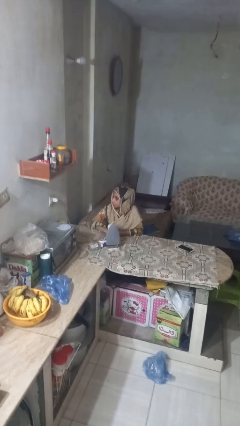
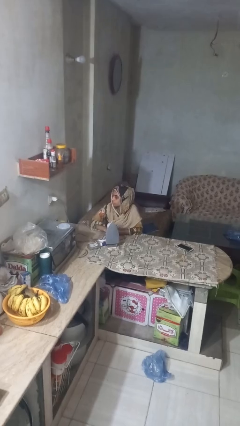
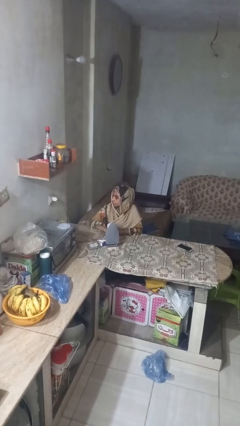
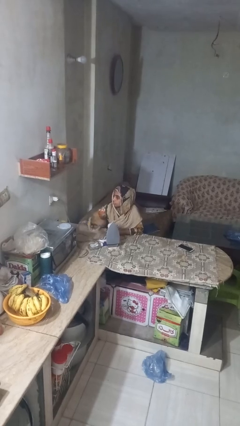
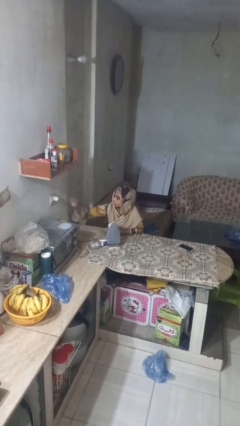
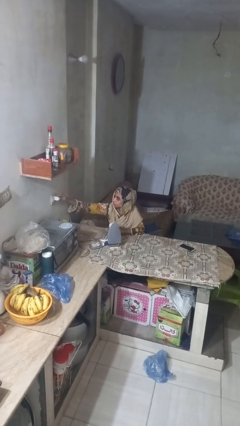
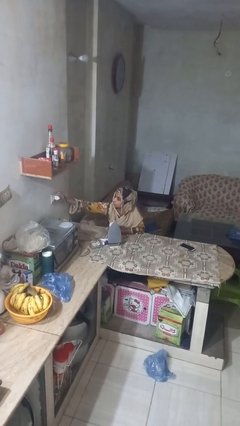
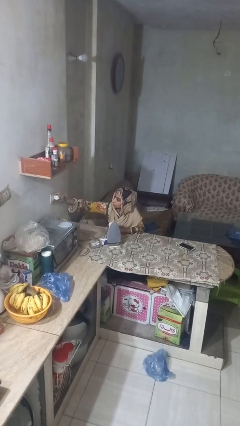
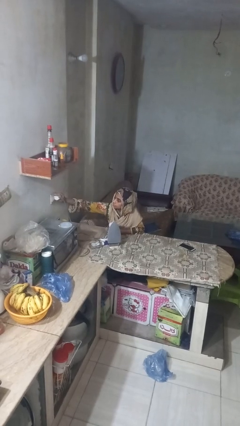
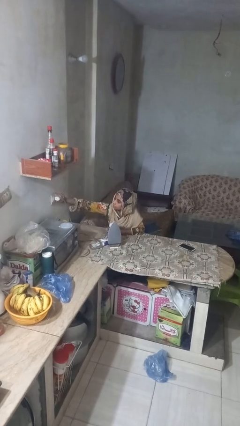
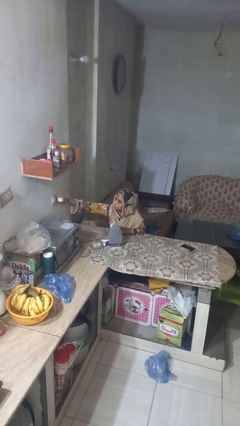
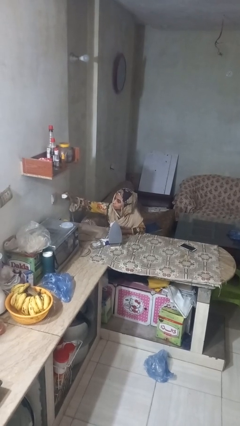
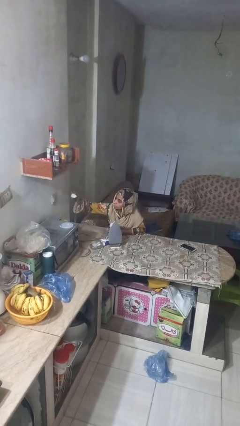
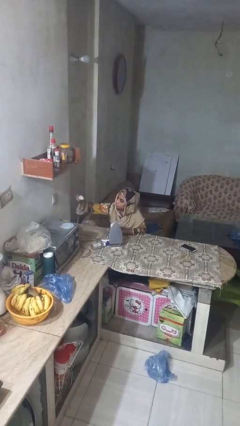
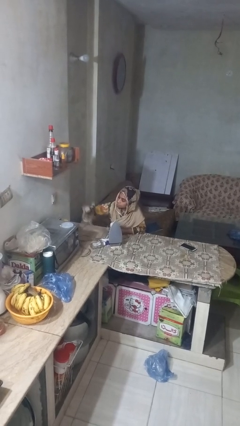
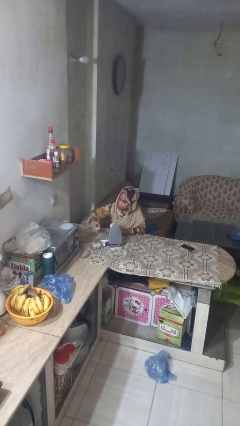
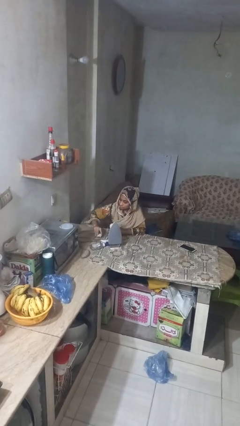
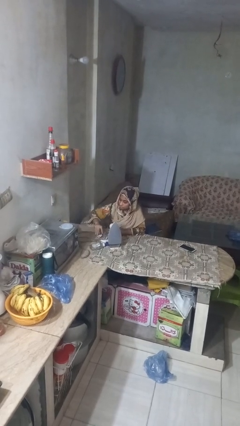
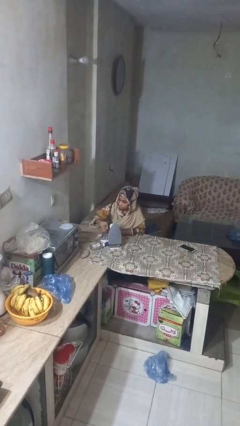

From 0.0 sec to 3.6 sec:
person unplugs from electrical socket

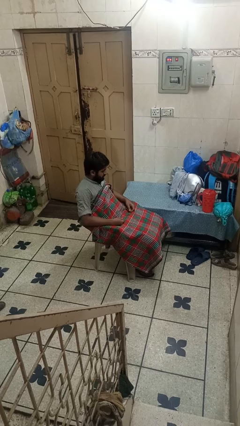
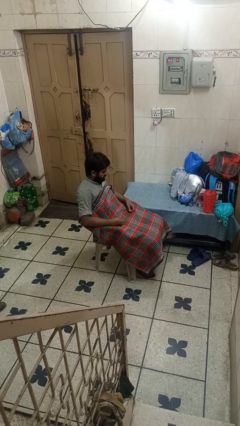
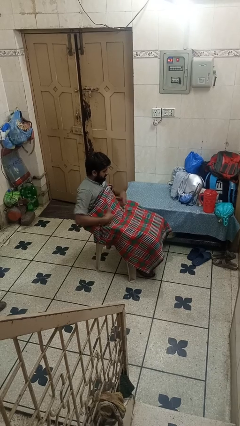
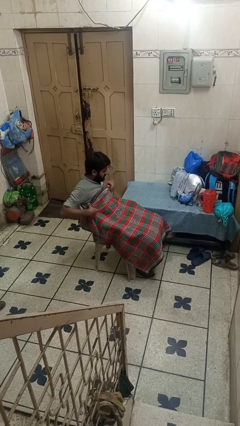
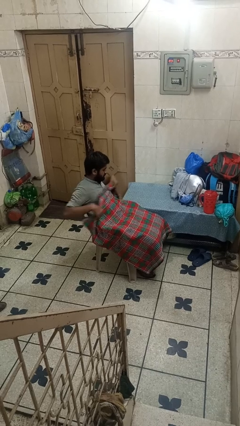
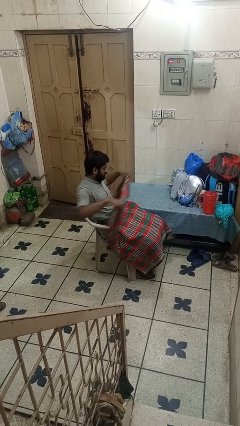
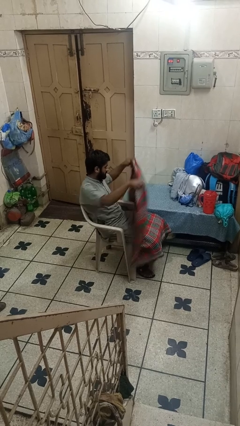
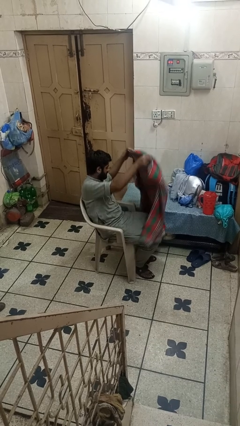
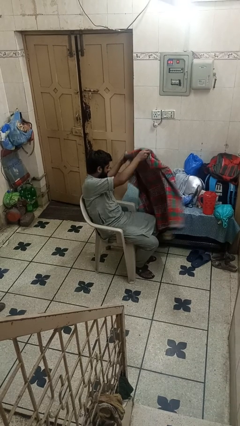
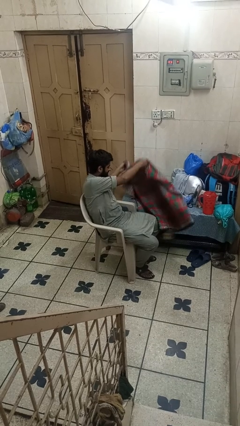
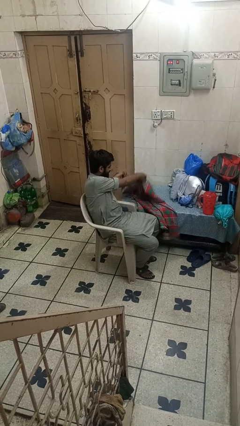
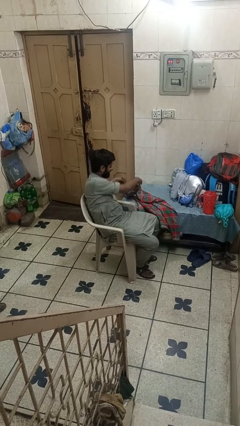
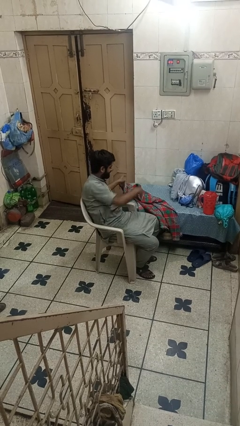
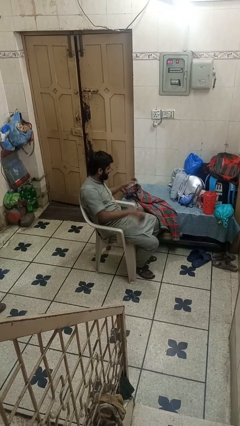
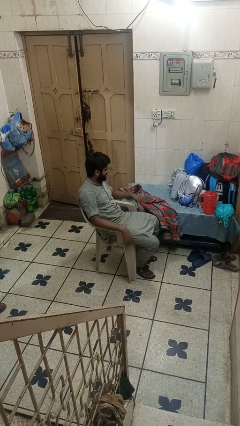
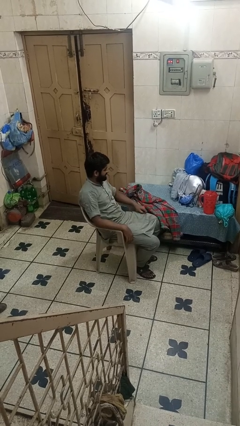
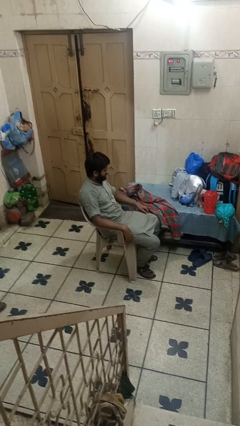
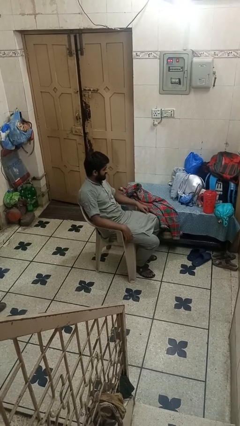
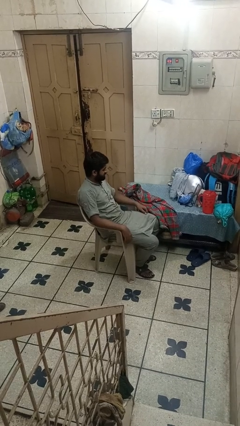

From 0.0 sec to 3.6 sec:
person uncovers with blanket

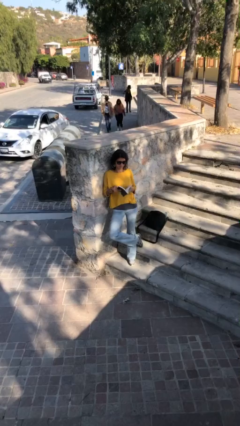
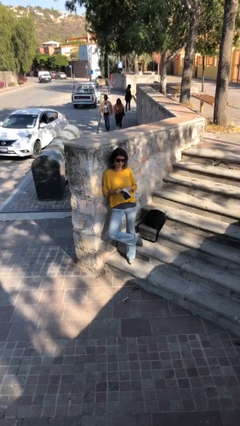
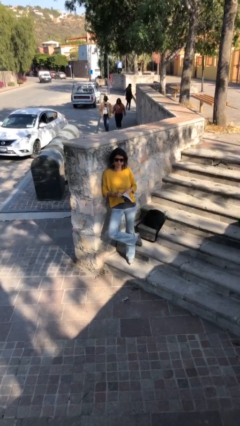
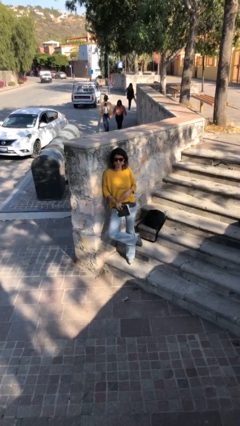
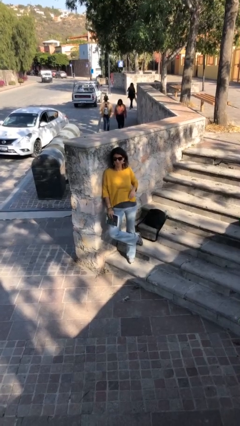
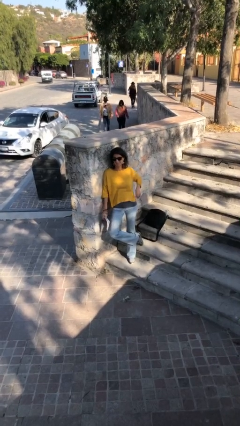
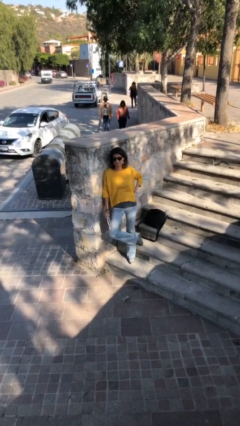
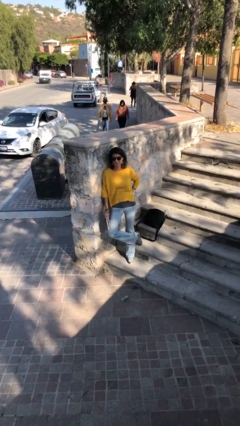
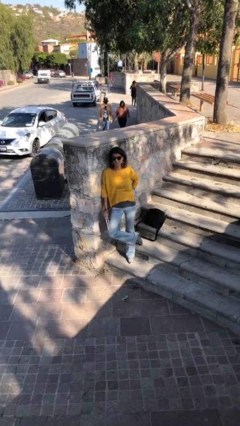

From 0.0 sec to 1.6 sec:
person reads document

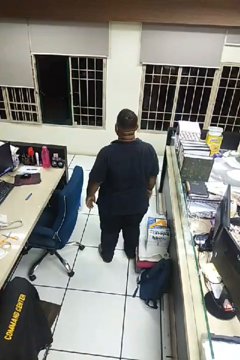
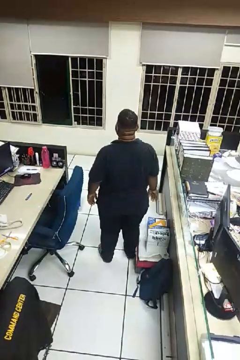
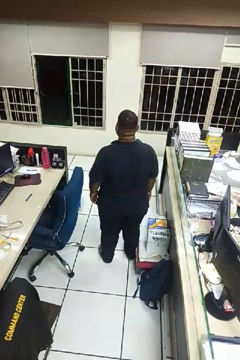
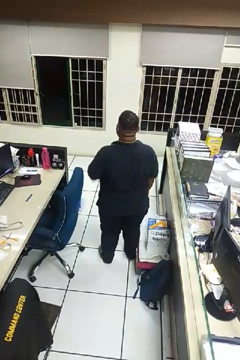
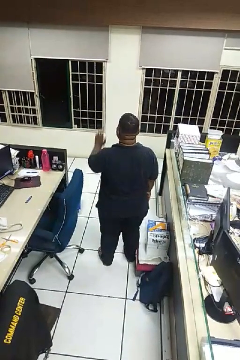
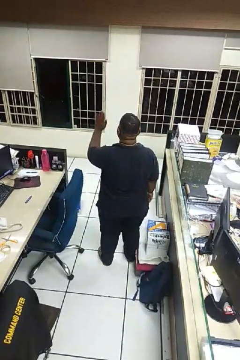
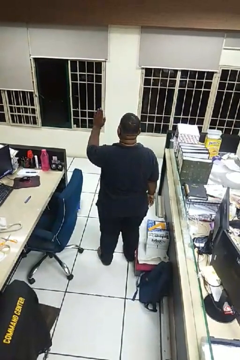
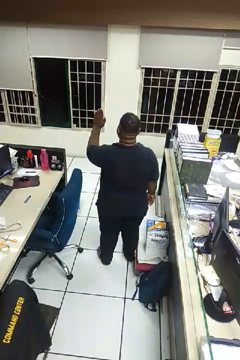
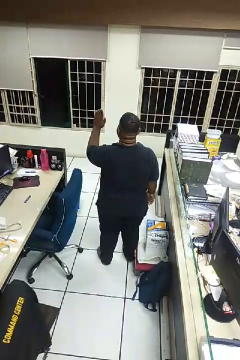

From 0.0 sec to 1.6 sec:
person gestures stop

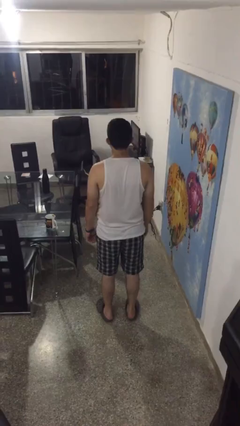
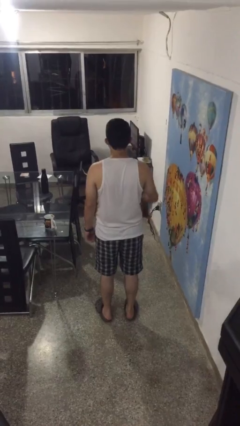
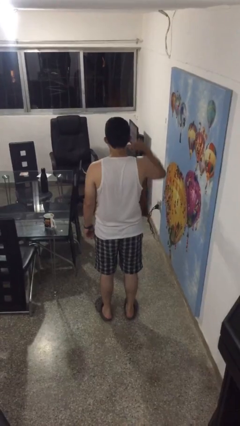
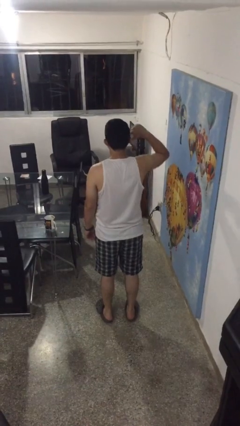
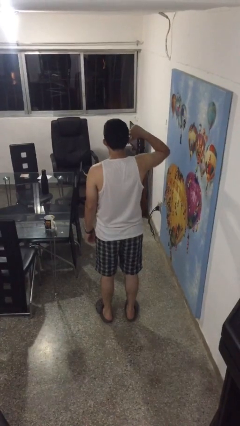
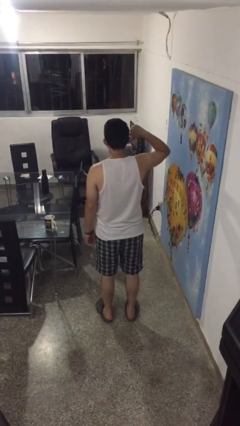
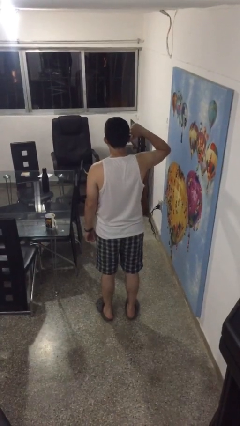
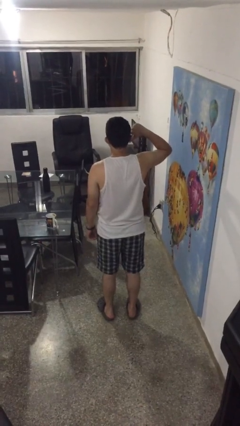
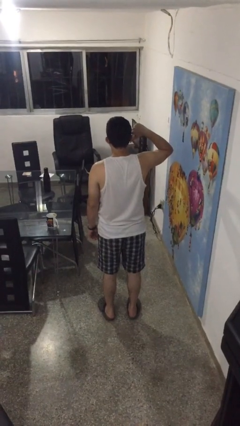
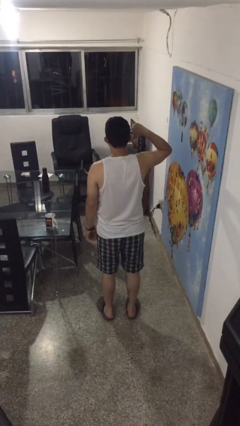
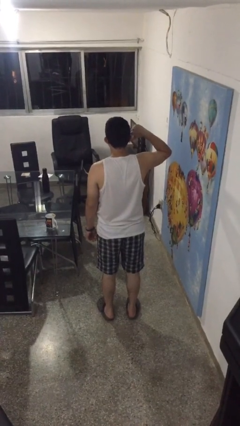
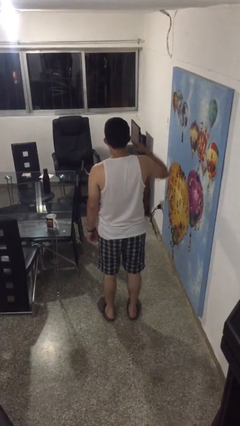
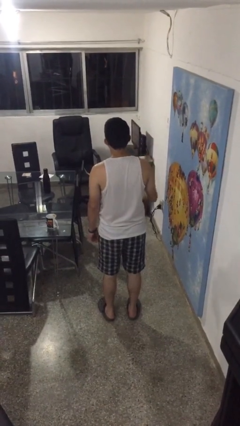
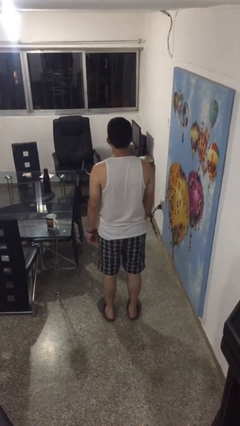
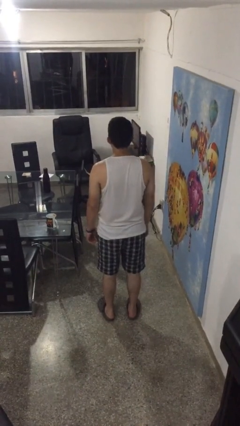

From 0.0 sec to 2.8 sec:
person gestures thumbs down

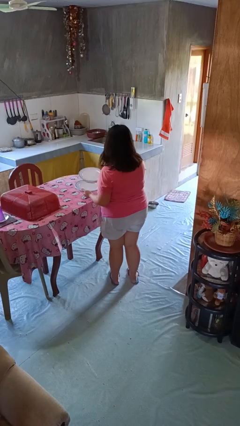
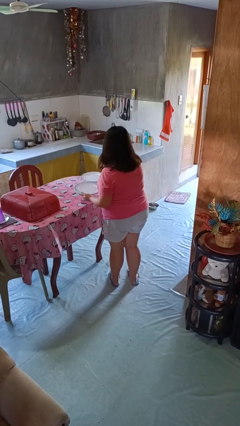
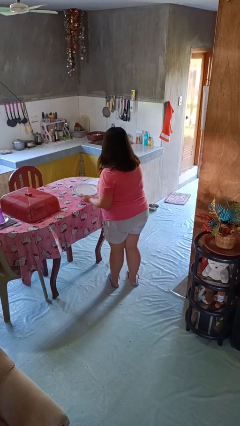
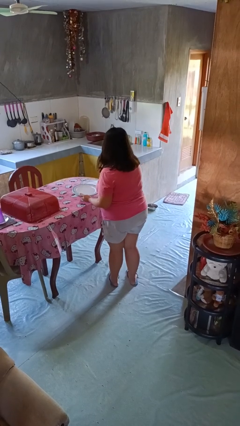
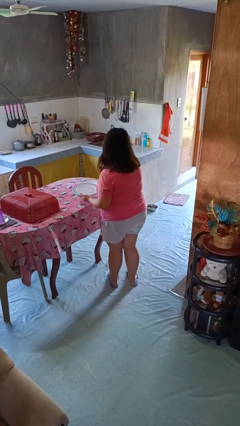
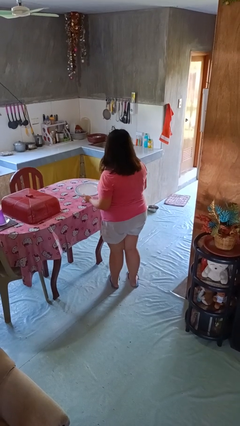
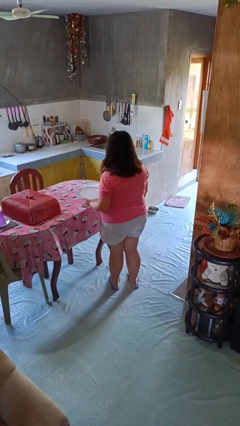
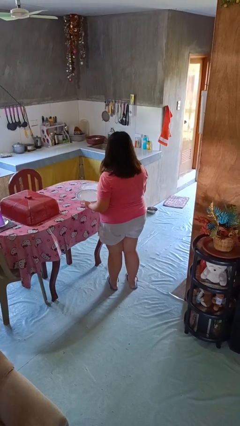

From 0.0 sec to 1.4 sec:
person sets table

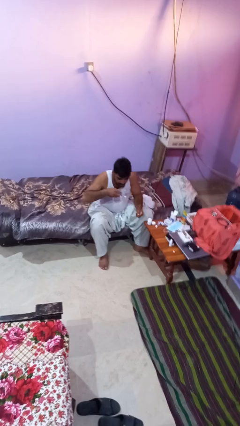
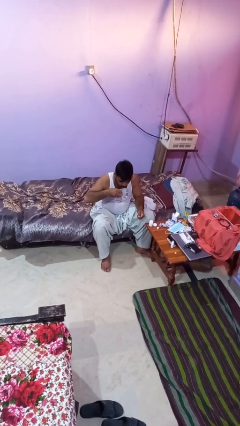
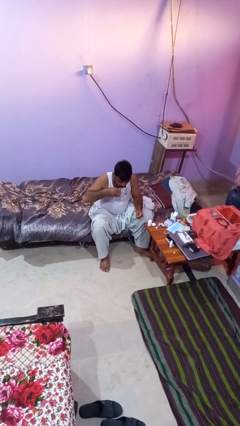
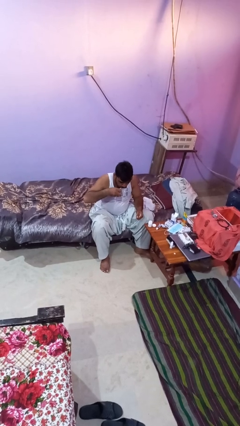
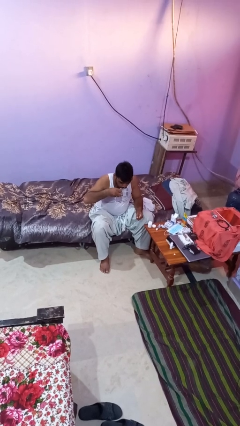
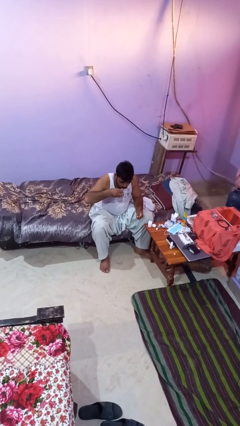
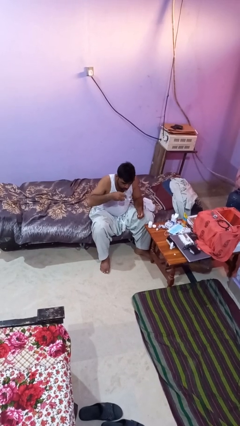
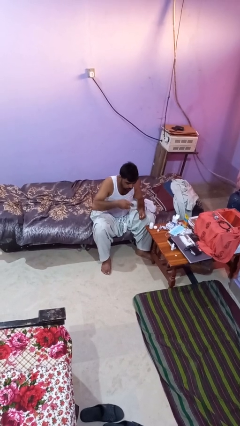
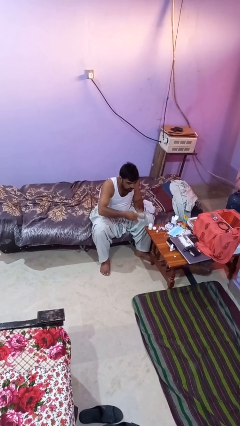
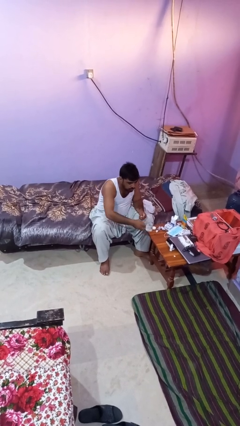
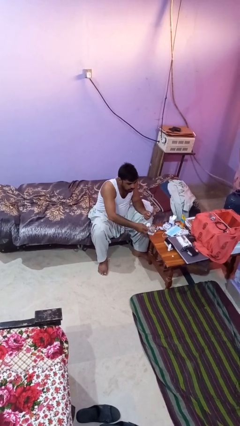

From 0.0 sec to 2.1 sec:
person drinks from cup

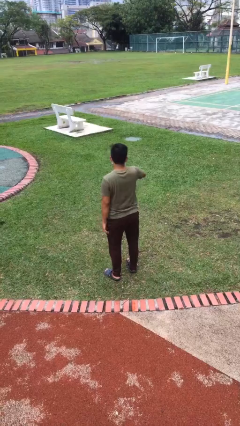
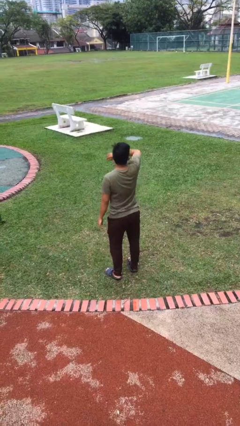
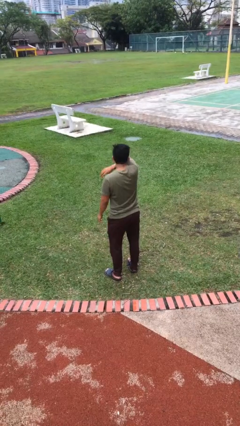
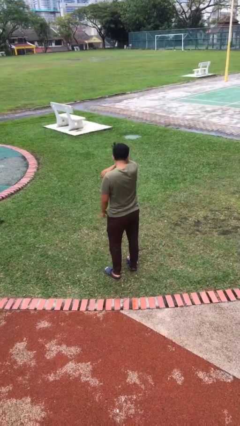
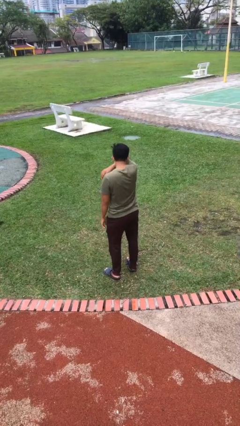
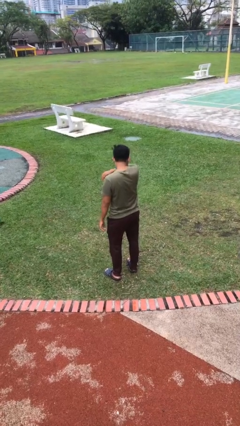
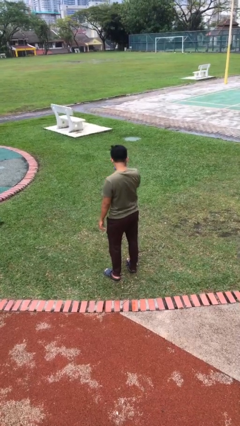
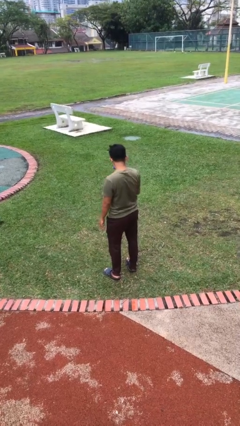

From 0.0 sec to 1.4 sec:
person sneezes into arm
